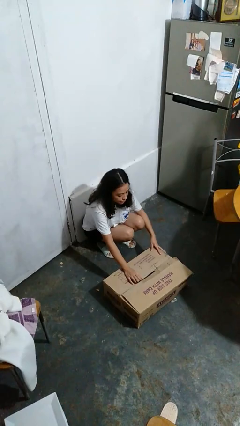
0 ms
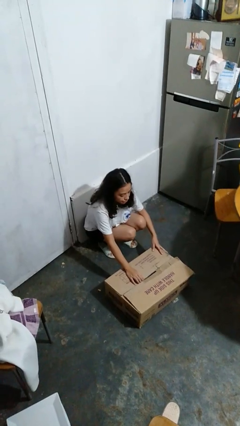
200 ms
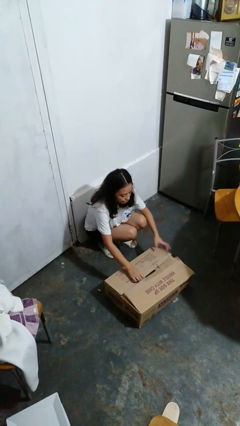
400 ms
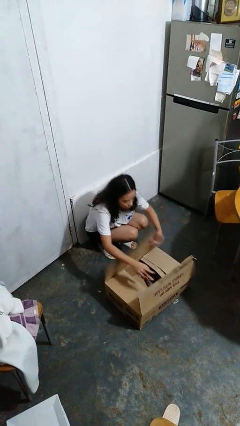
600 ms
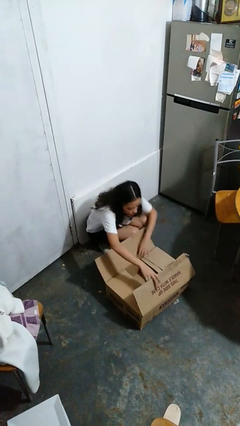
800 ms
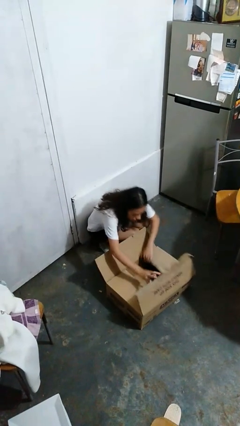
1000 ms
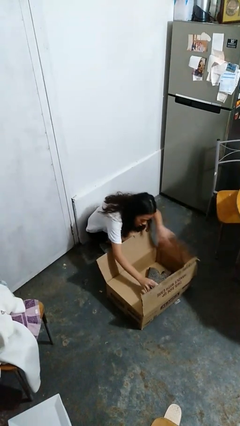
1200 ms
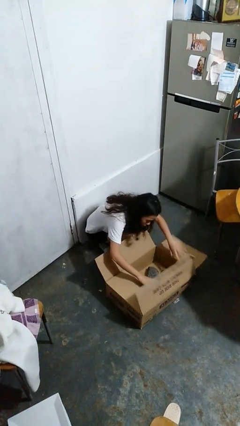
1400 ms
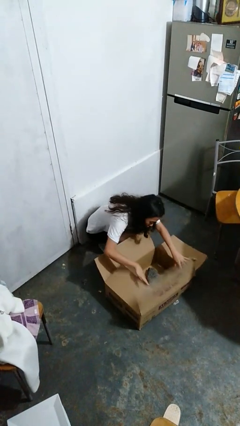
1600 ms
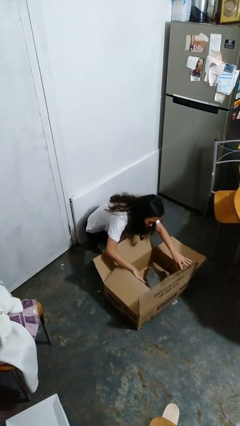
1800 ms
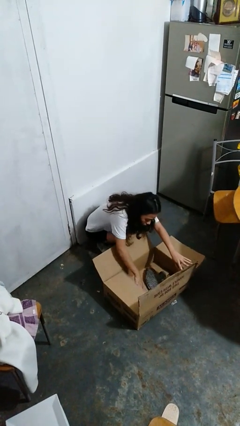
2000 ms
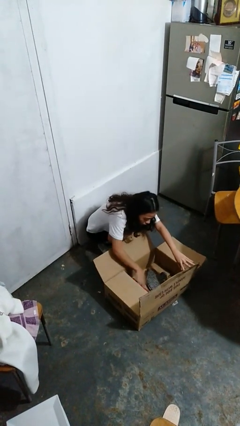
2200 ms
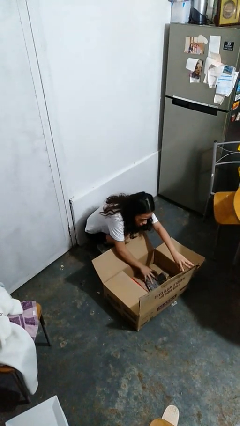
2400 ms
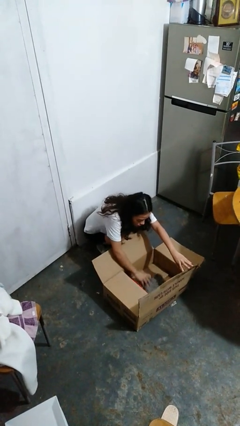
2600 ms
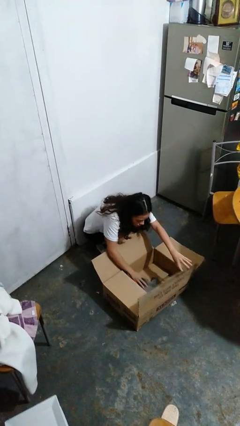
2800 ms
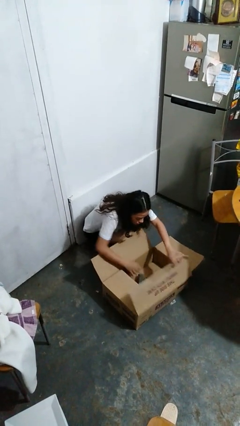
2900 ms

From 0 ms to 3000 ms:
person searches in box

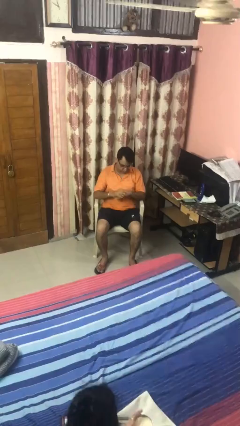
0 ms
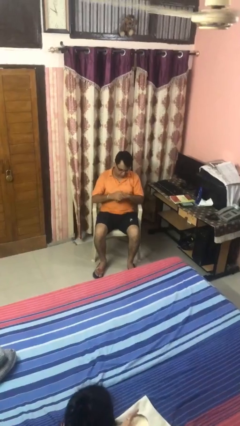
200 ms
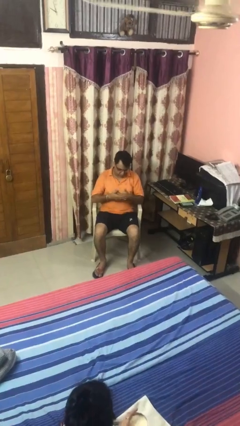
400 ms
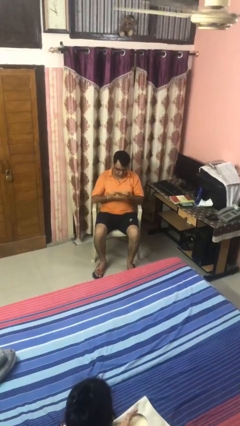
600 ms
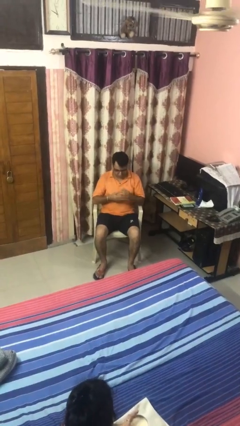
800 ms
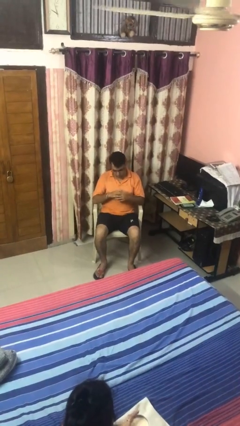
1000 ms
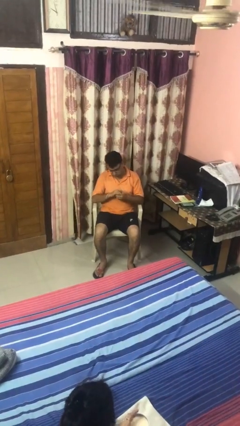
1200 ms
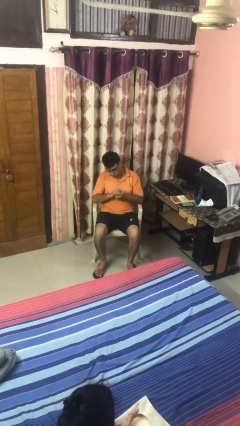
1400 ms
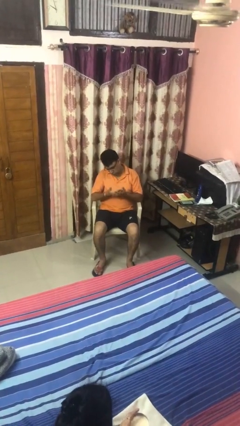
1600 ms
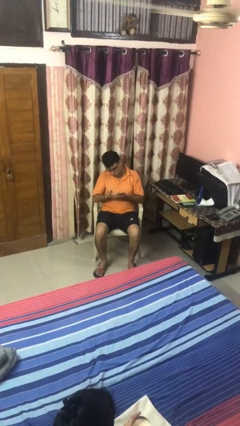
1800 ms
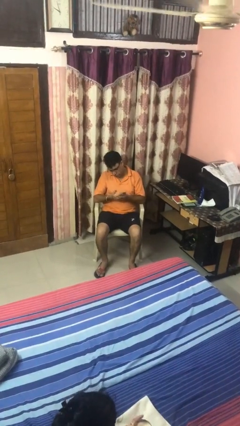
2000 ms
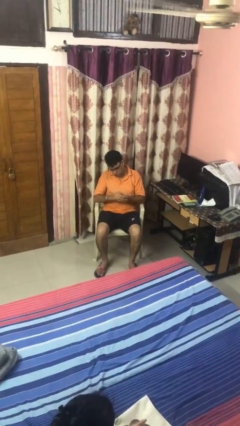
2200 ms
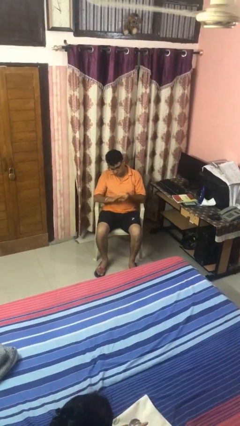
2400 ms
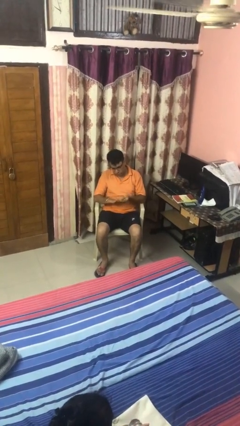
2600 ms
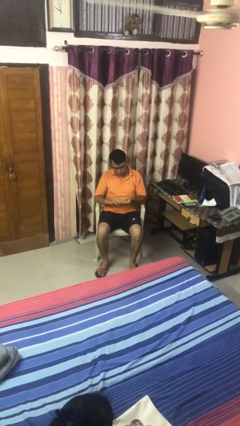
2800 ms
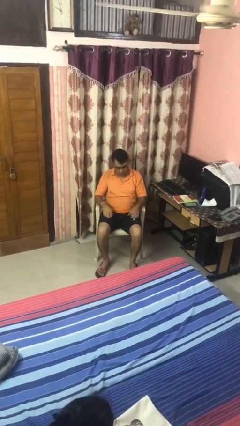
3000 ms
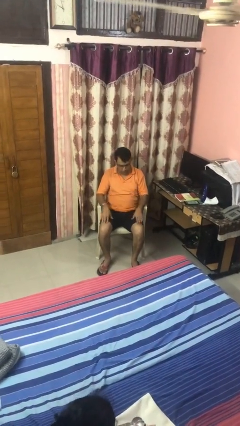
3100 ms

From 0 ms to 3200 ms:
person looks at hands in lap

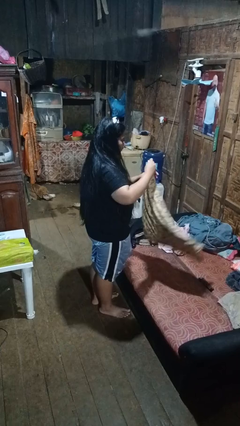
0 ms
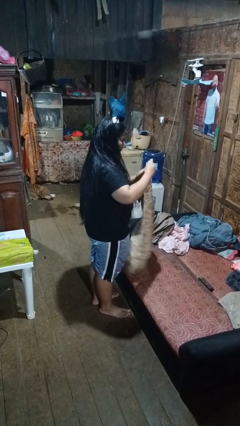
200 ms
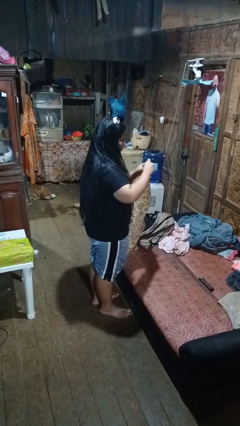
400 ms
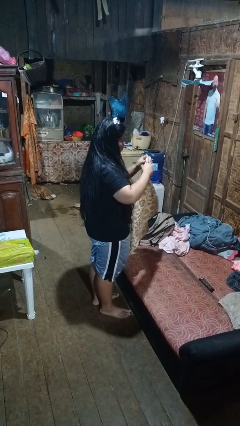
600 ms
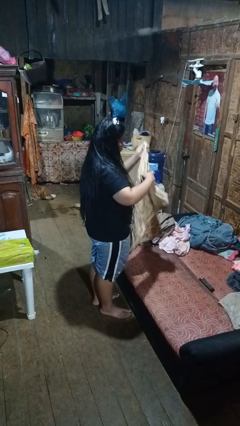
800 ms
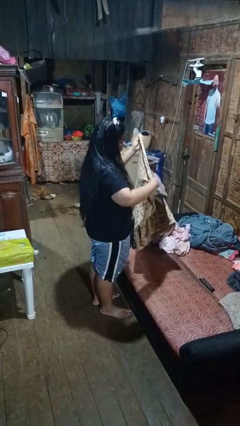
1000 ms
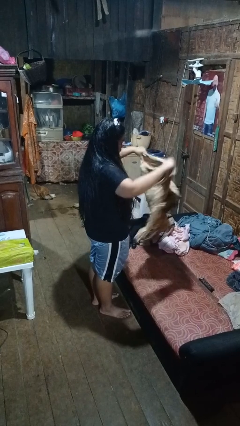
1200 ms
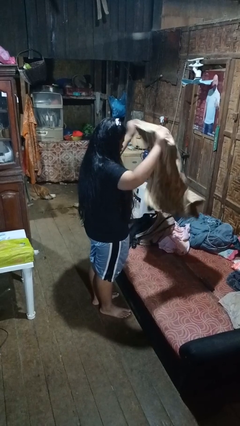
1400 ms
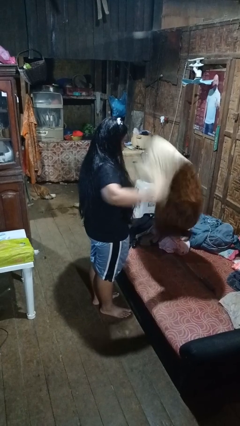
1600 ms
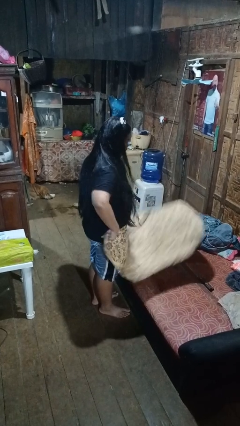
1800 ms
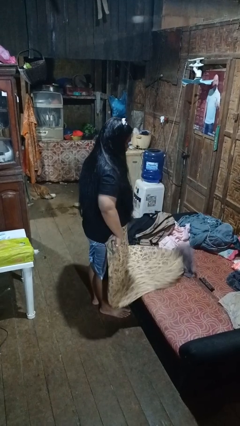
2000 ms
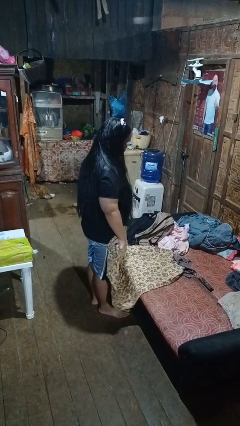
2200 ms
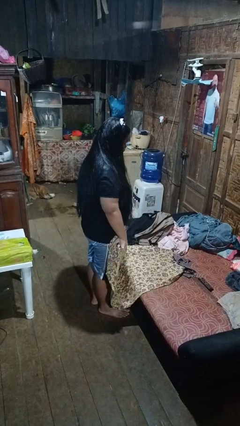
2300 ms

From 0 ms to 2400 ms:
person unfolds blanket

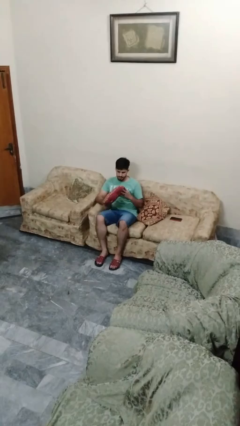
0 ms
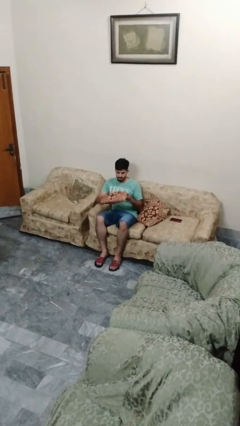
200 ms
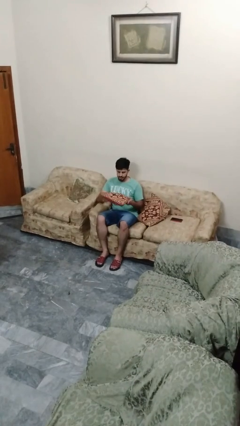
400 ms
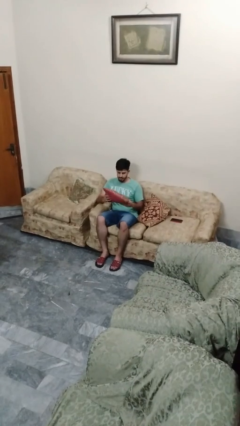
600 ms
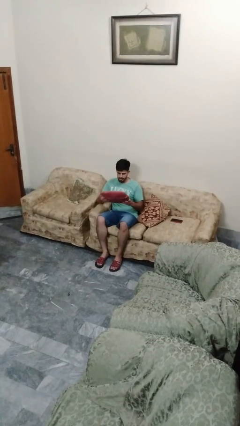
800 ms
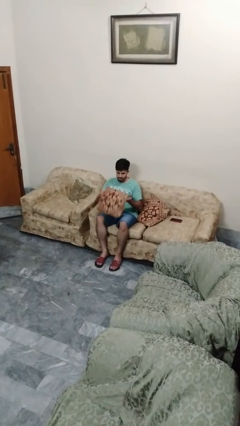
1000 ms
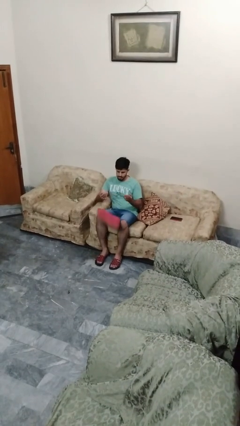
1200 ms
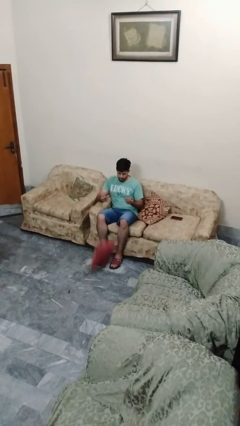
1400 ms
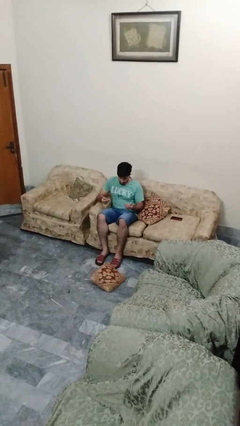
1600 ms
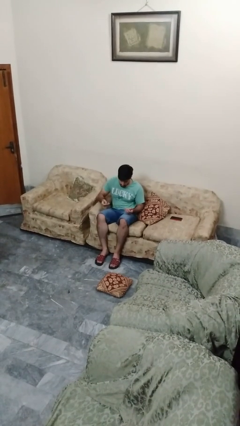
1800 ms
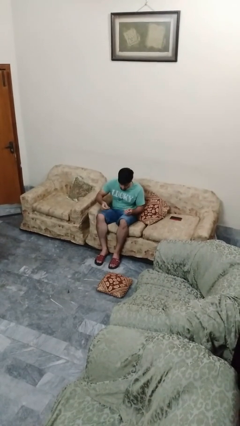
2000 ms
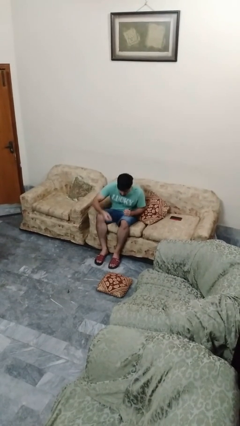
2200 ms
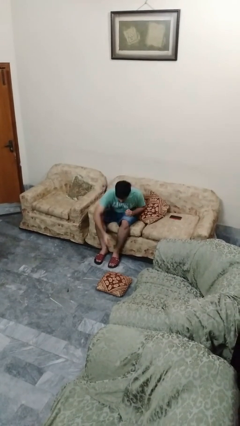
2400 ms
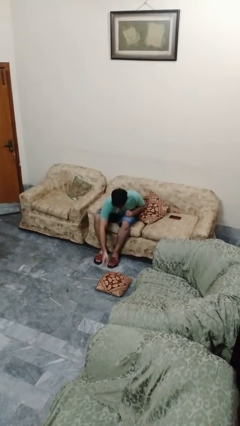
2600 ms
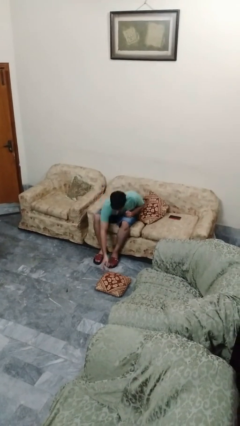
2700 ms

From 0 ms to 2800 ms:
person drops object

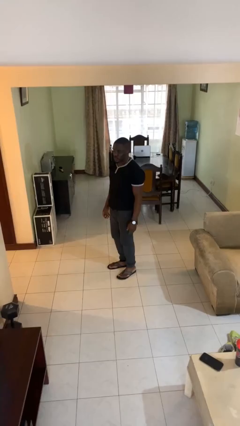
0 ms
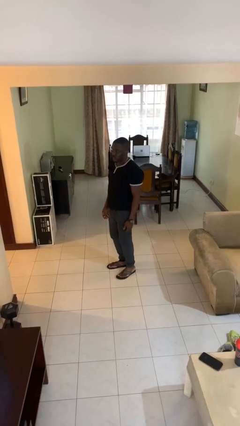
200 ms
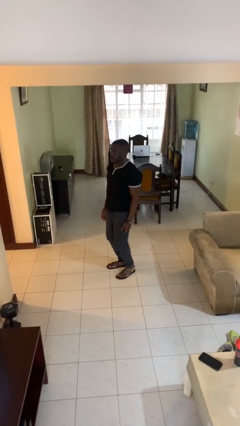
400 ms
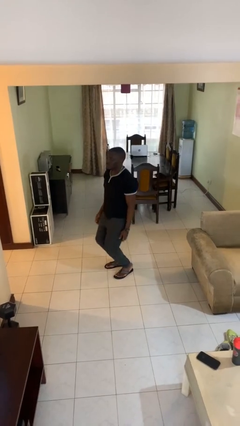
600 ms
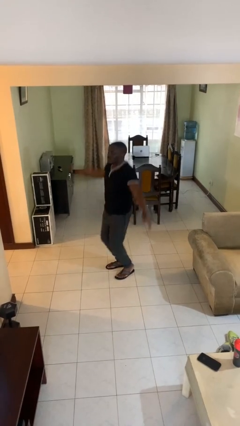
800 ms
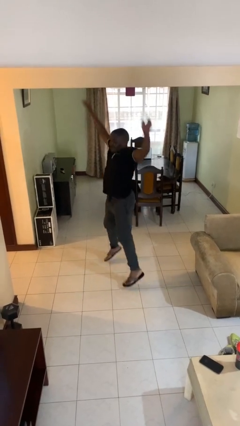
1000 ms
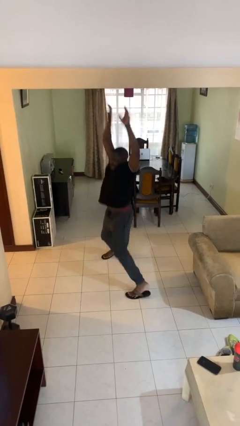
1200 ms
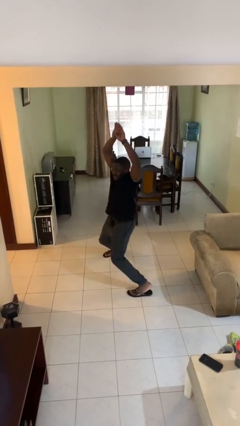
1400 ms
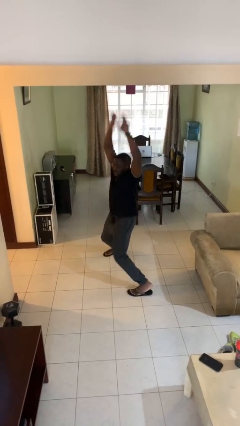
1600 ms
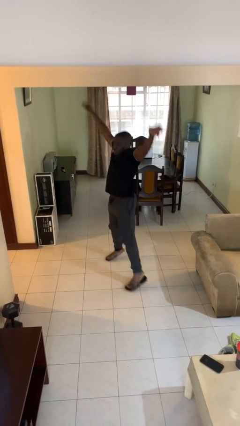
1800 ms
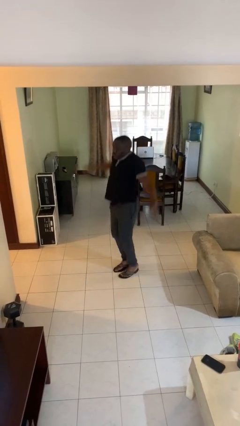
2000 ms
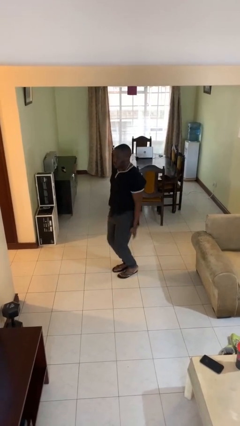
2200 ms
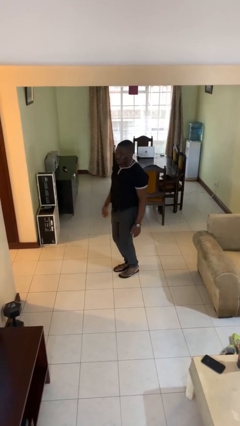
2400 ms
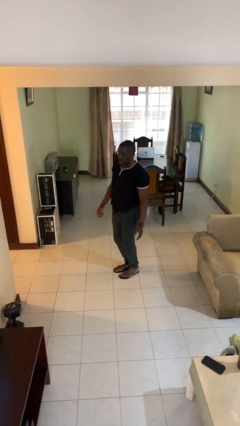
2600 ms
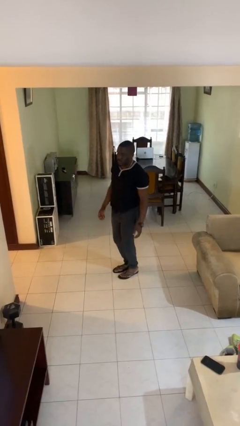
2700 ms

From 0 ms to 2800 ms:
person exercises with jumping jacks

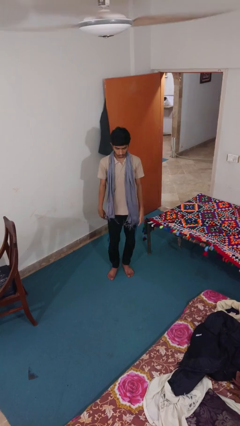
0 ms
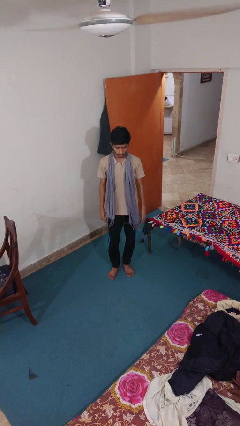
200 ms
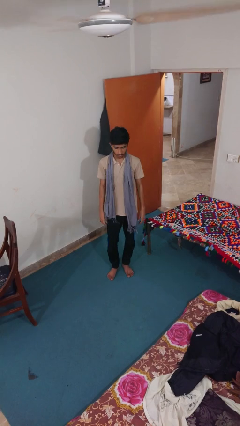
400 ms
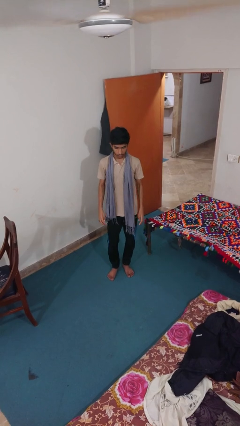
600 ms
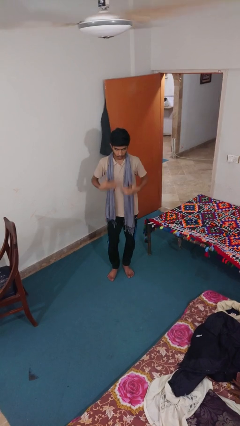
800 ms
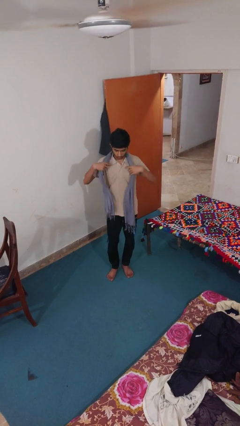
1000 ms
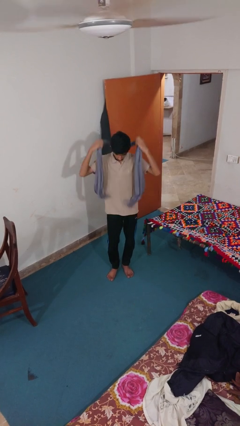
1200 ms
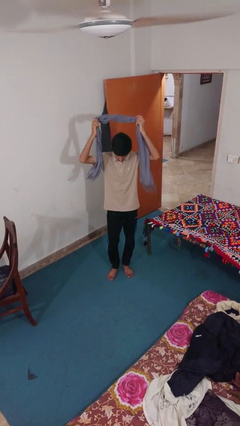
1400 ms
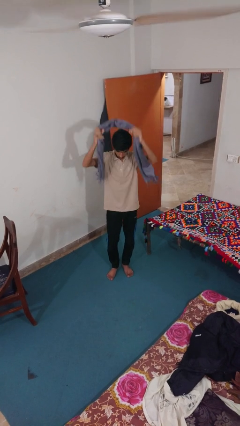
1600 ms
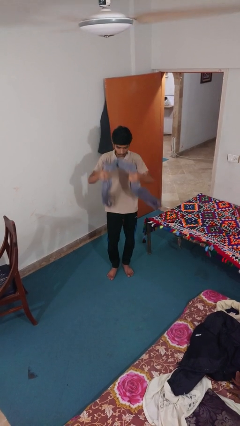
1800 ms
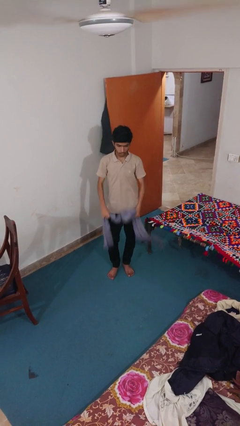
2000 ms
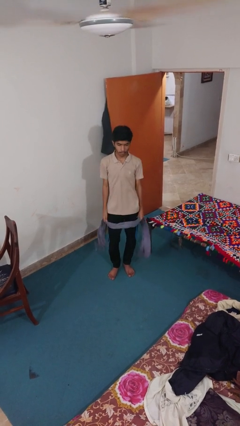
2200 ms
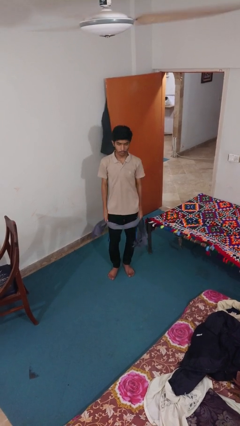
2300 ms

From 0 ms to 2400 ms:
person takes off scarf

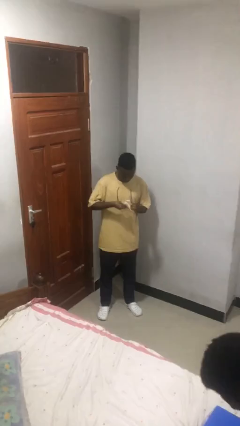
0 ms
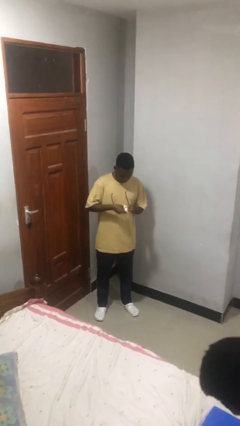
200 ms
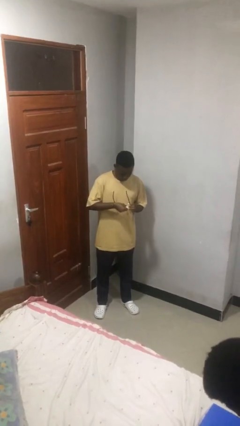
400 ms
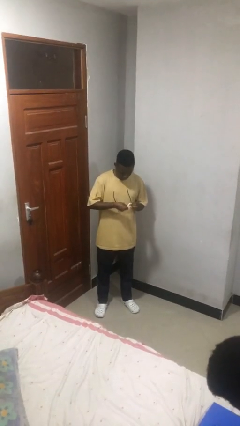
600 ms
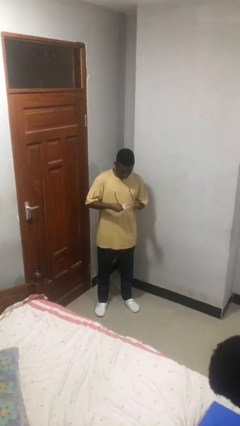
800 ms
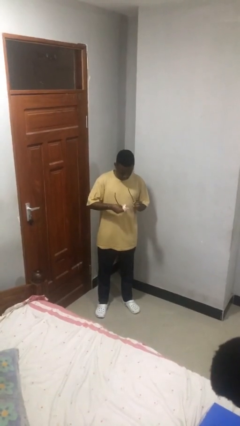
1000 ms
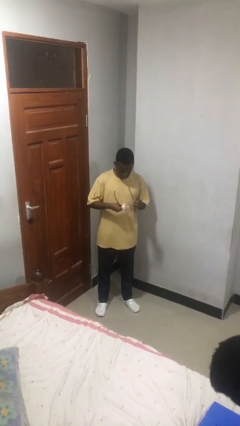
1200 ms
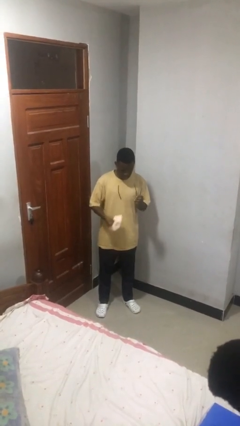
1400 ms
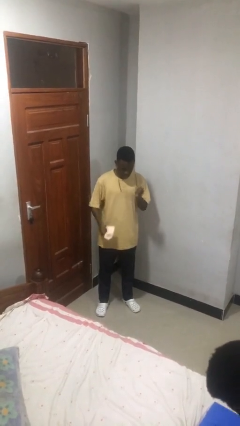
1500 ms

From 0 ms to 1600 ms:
person cleans eyeglasses
